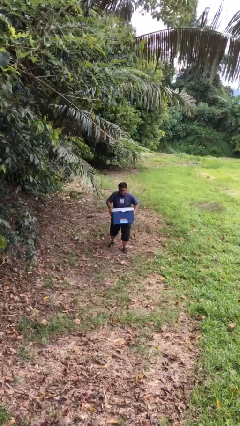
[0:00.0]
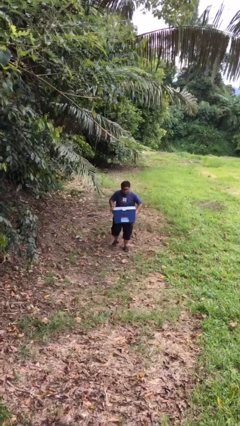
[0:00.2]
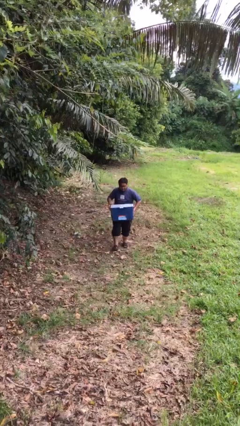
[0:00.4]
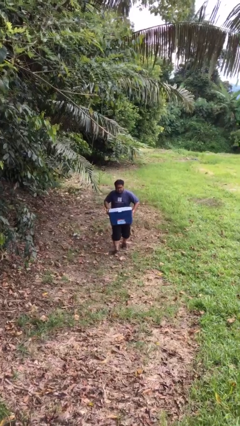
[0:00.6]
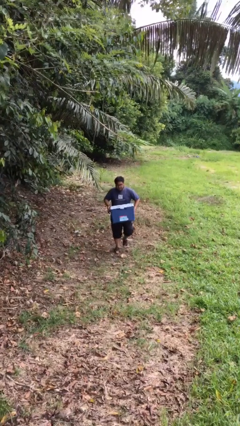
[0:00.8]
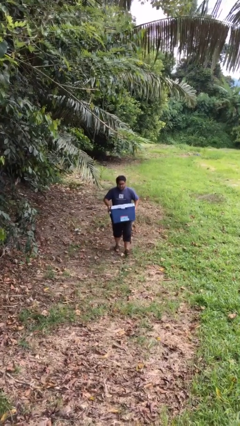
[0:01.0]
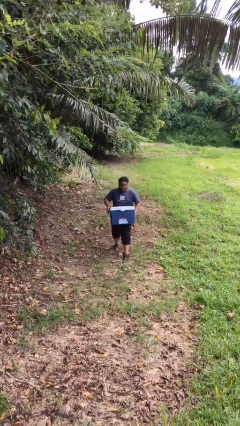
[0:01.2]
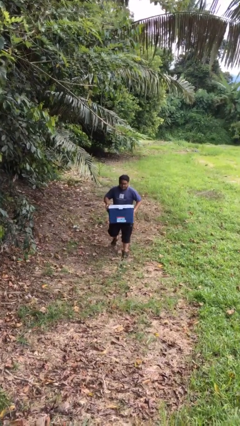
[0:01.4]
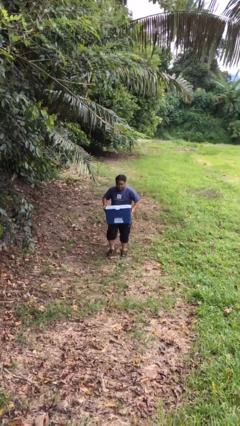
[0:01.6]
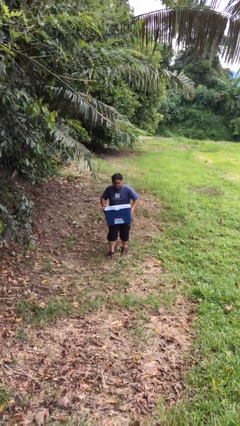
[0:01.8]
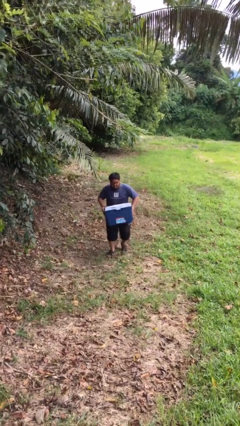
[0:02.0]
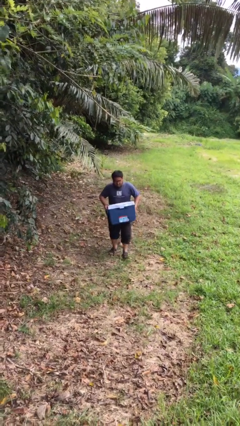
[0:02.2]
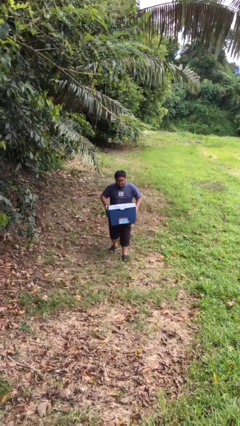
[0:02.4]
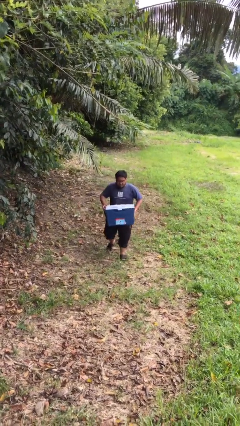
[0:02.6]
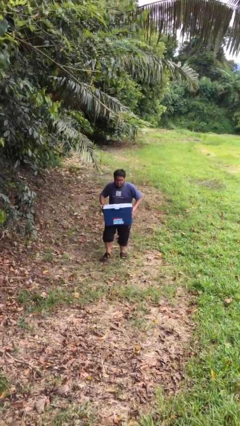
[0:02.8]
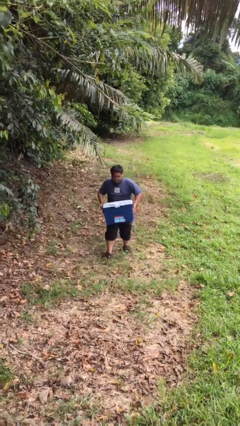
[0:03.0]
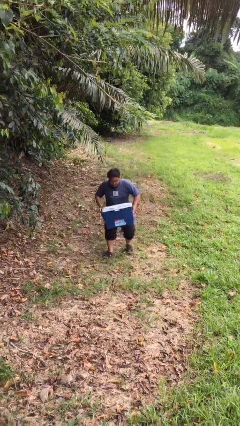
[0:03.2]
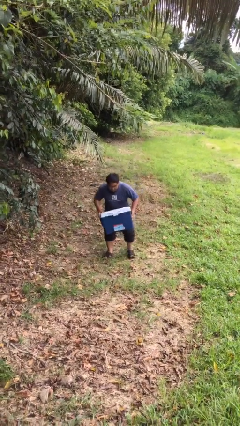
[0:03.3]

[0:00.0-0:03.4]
person carries heavy object

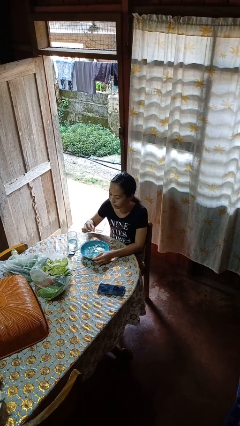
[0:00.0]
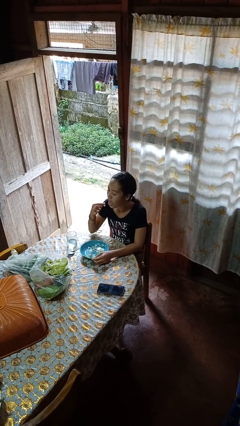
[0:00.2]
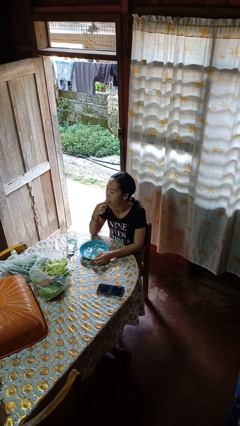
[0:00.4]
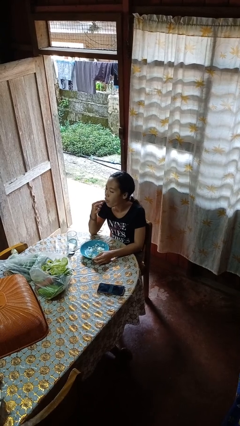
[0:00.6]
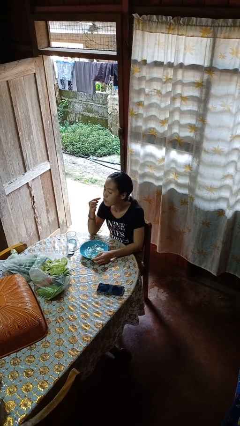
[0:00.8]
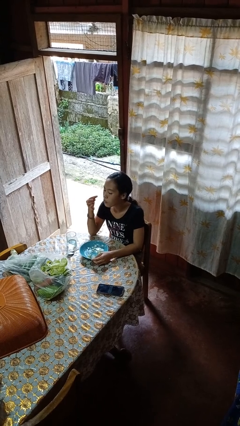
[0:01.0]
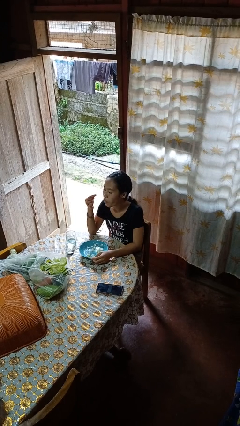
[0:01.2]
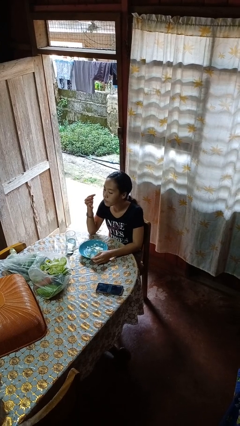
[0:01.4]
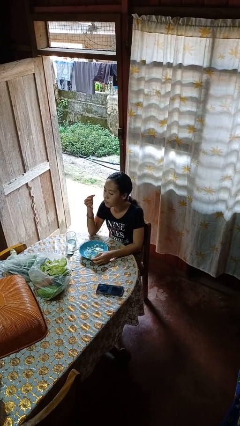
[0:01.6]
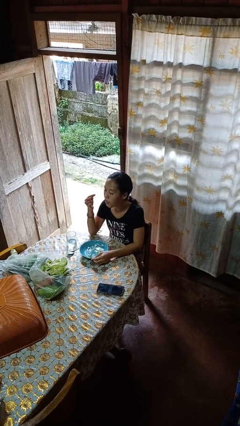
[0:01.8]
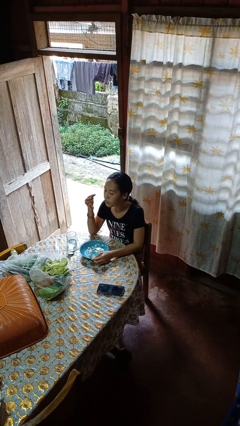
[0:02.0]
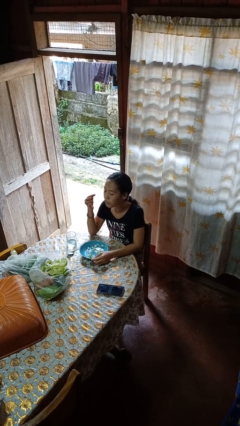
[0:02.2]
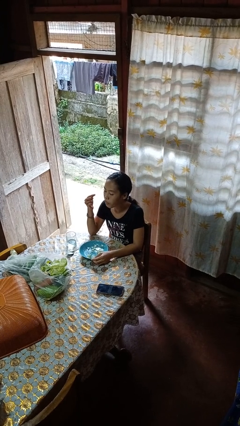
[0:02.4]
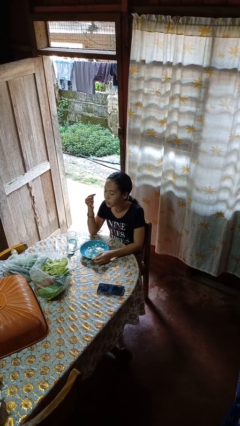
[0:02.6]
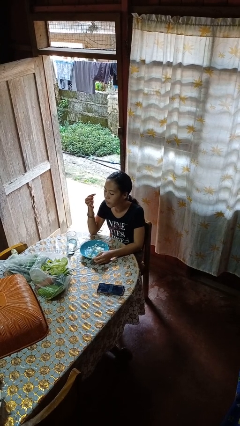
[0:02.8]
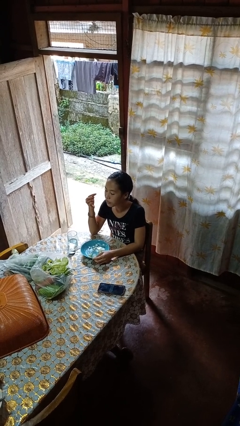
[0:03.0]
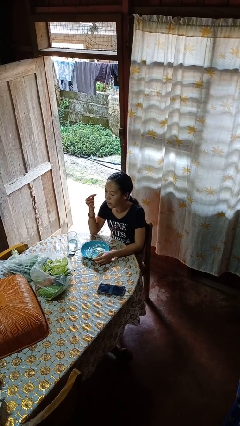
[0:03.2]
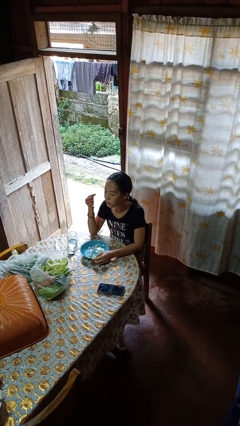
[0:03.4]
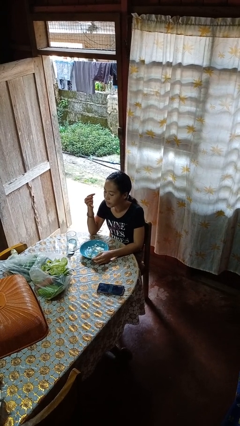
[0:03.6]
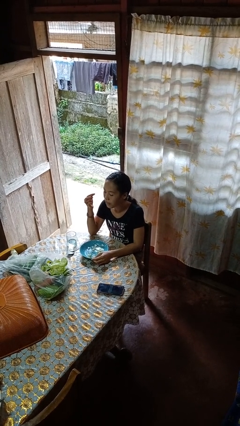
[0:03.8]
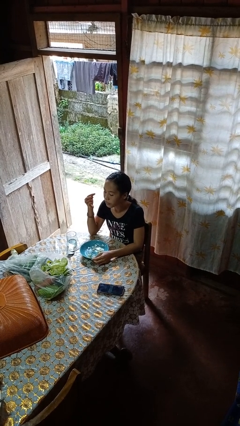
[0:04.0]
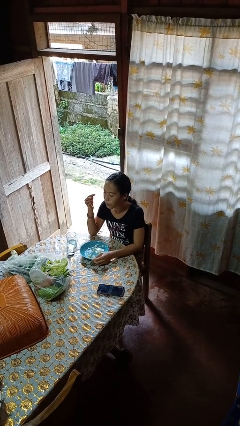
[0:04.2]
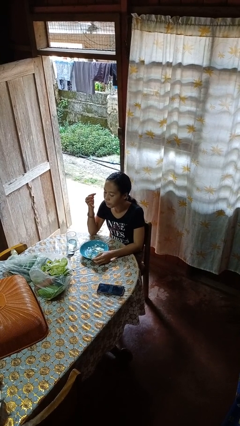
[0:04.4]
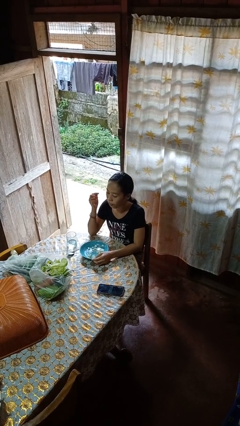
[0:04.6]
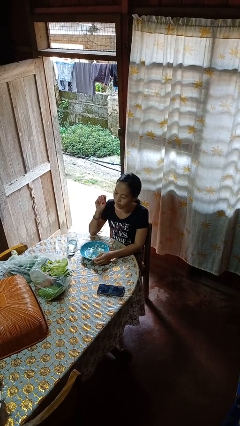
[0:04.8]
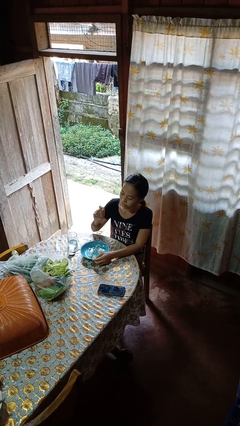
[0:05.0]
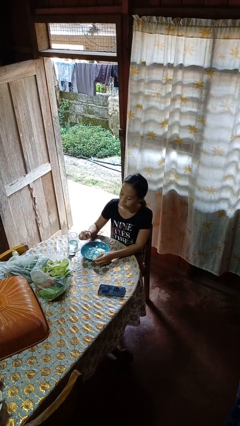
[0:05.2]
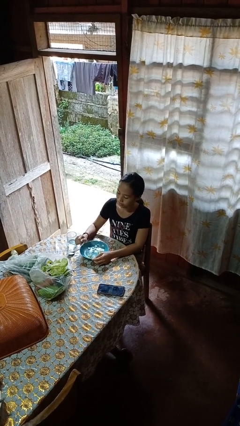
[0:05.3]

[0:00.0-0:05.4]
person eats with hands

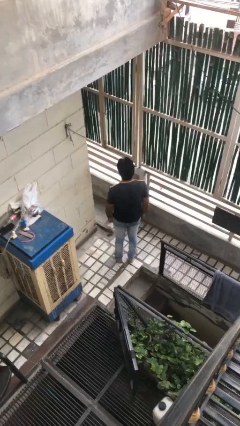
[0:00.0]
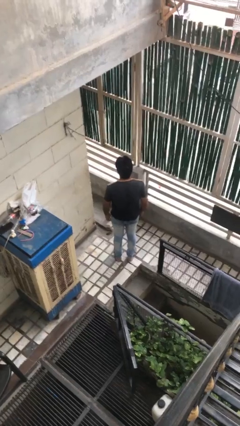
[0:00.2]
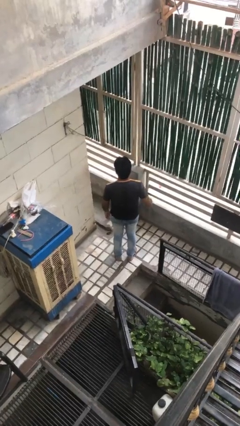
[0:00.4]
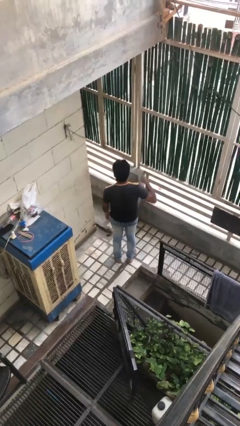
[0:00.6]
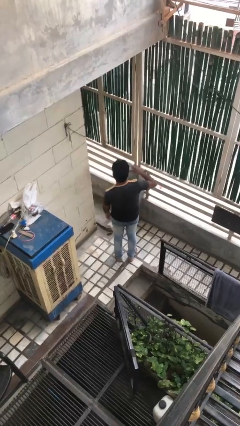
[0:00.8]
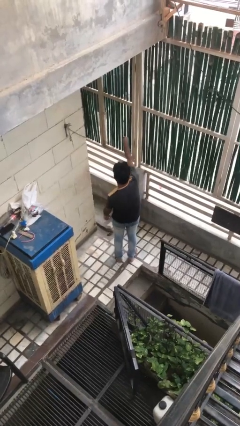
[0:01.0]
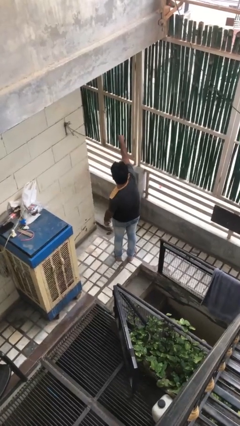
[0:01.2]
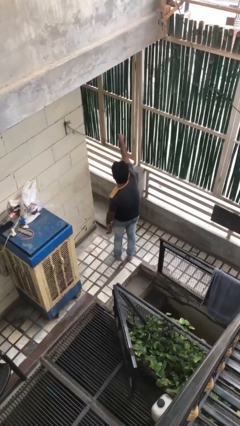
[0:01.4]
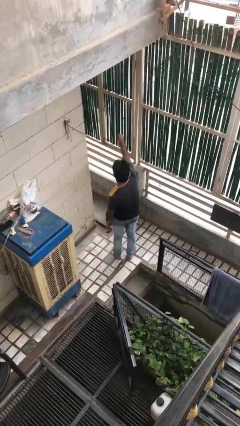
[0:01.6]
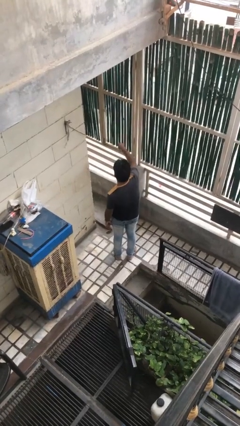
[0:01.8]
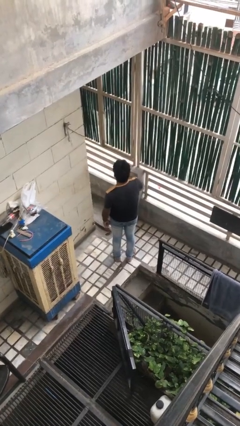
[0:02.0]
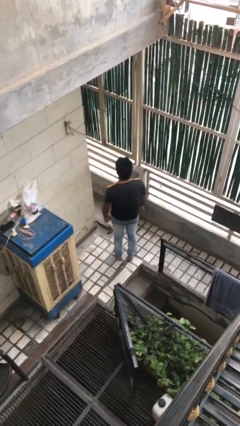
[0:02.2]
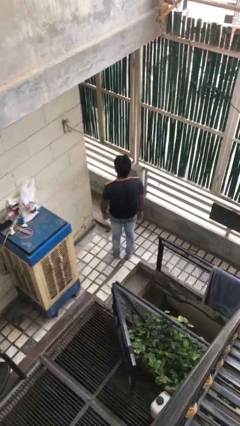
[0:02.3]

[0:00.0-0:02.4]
person punches

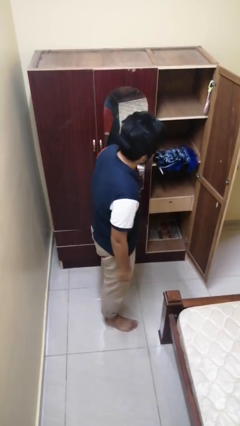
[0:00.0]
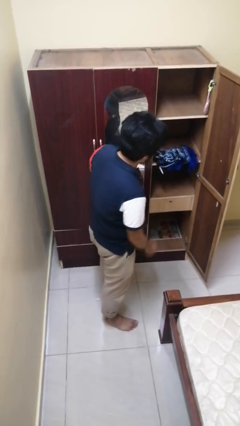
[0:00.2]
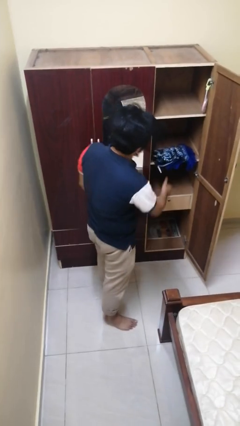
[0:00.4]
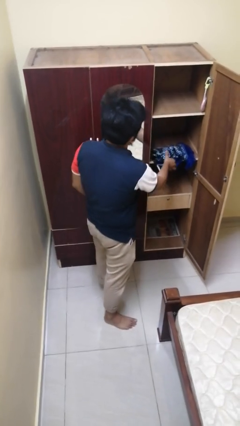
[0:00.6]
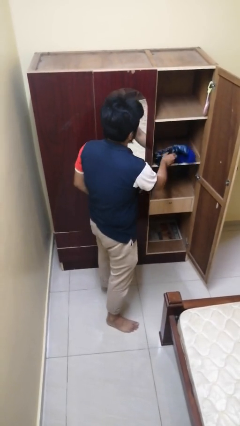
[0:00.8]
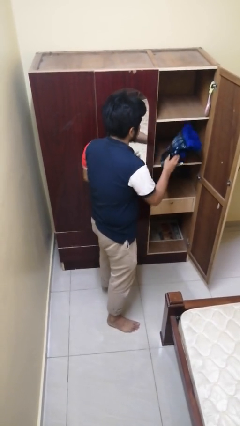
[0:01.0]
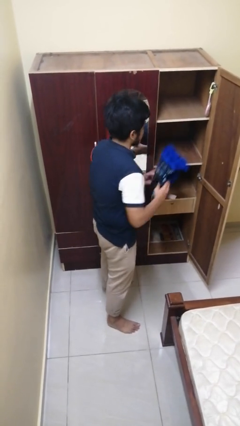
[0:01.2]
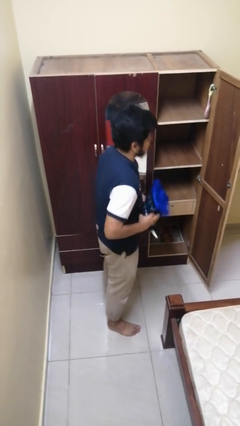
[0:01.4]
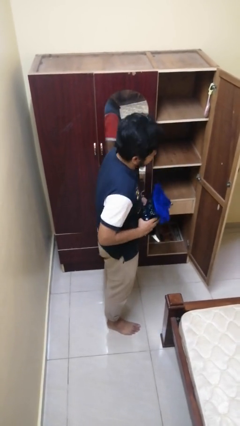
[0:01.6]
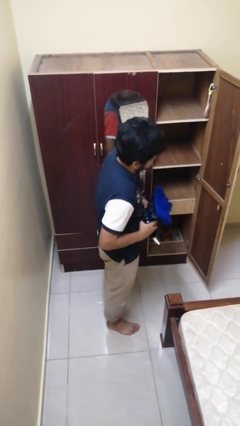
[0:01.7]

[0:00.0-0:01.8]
person picks up object from cabinet

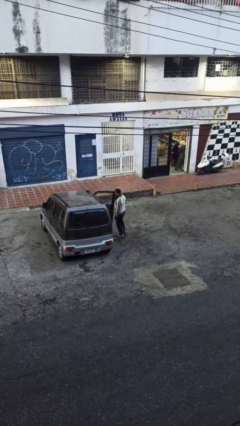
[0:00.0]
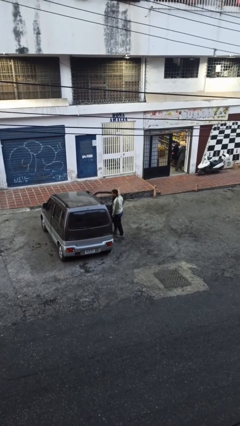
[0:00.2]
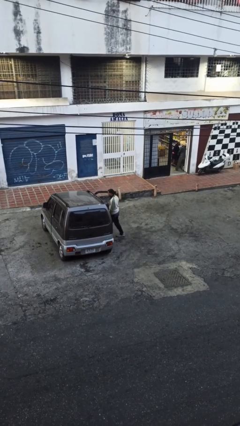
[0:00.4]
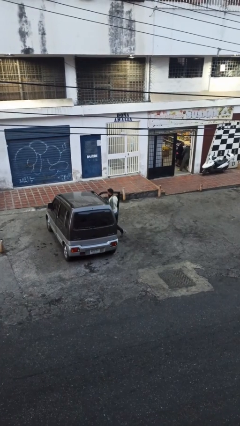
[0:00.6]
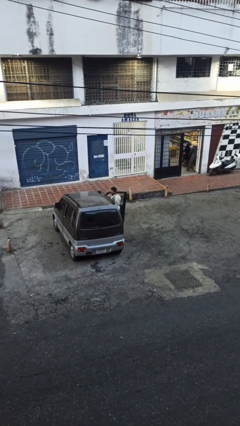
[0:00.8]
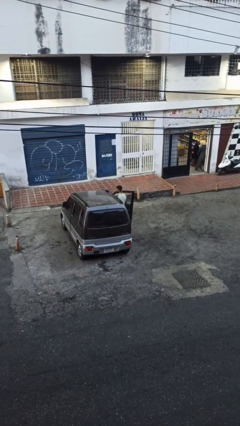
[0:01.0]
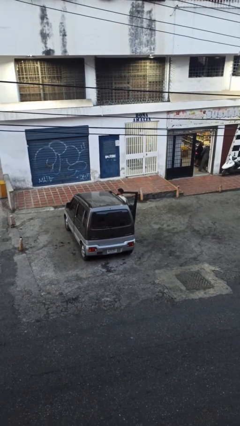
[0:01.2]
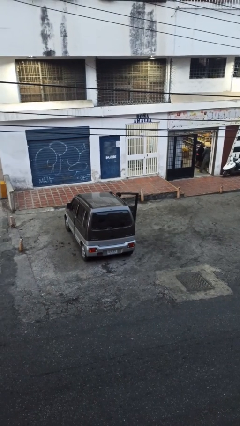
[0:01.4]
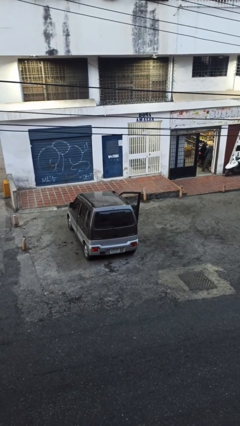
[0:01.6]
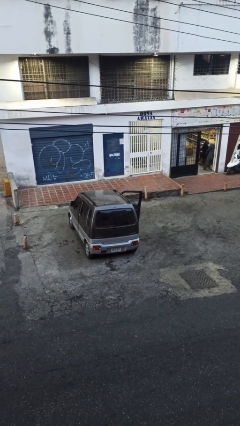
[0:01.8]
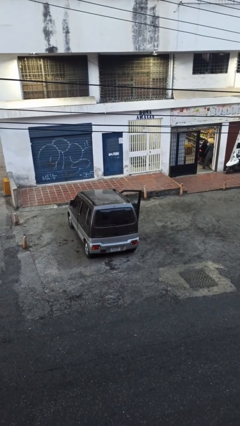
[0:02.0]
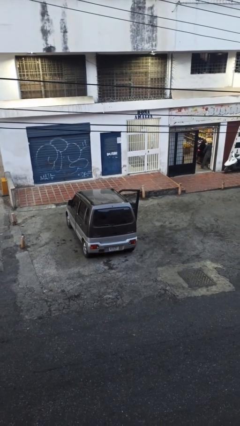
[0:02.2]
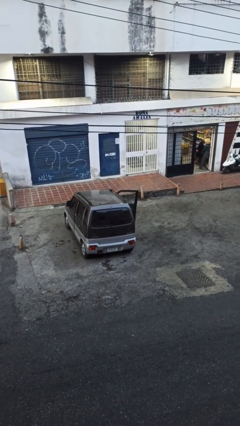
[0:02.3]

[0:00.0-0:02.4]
person enters car

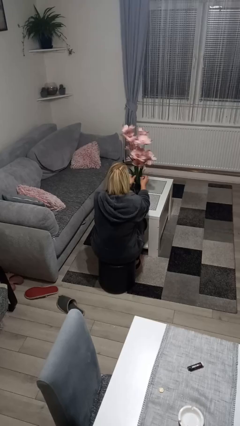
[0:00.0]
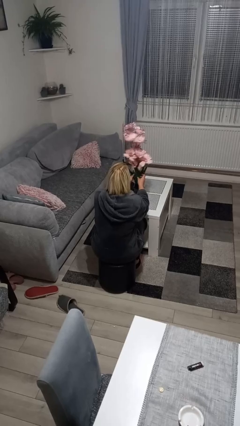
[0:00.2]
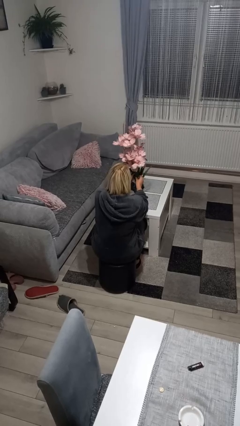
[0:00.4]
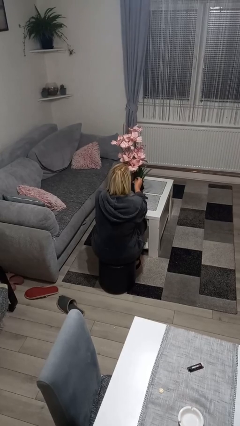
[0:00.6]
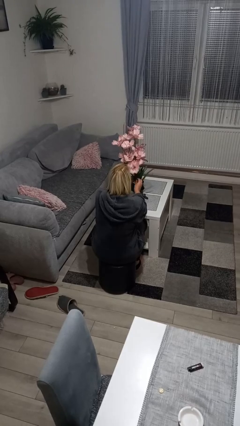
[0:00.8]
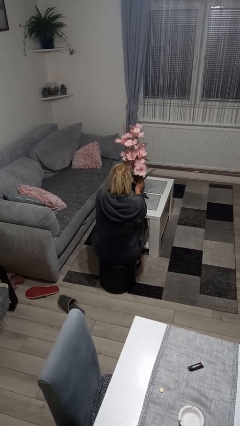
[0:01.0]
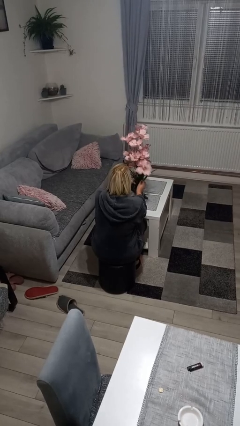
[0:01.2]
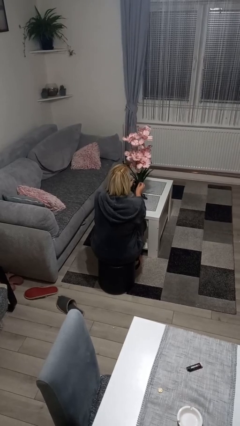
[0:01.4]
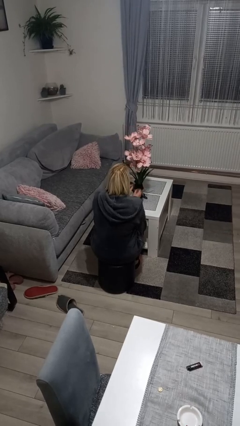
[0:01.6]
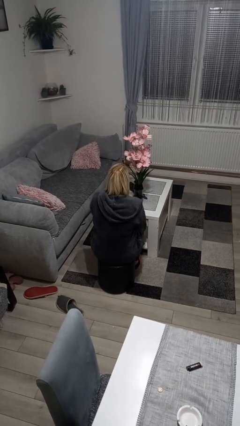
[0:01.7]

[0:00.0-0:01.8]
person arranges flowers in vase

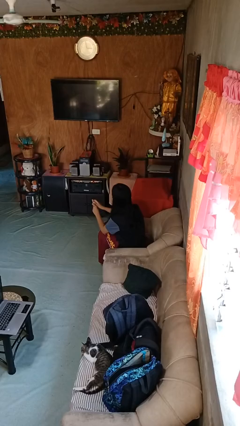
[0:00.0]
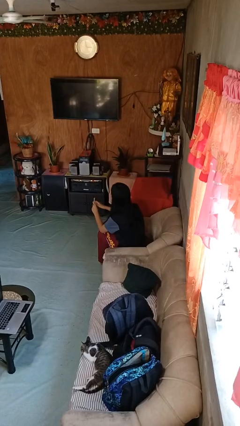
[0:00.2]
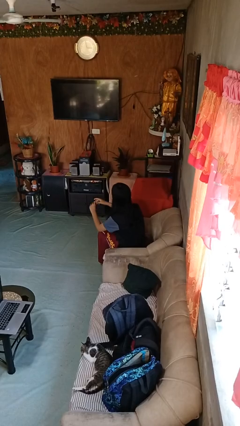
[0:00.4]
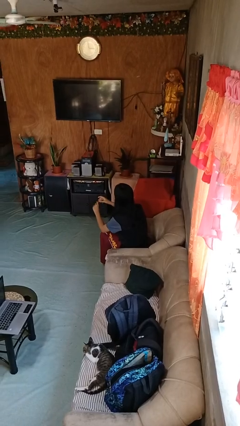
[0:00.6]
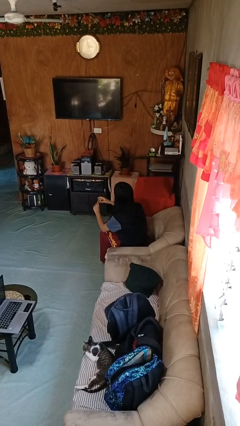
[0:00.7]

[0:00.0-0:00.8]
person files fingernails
